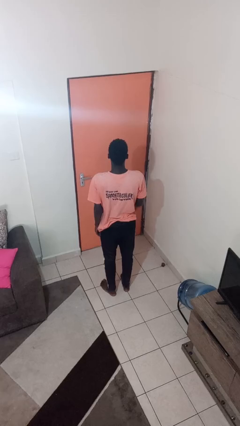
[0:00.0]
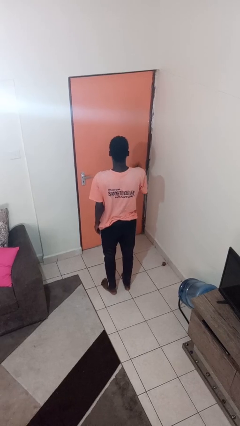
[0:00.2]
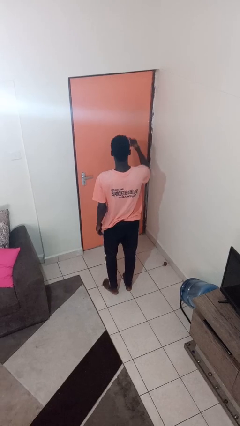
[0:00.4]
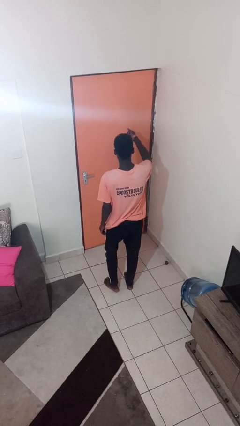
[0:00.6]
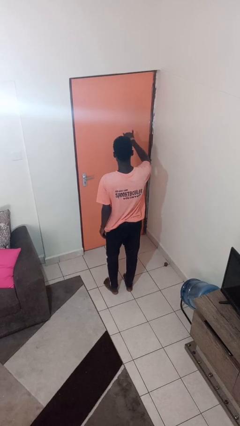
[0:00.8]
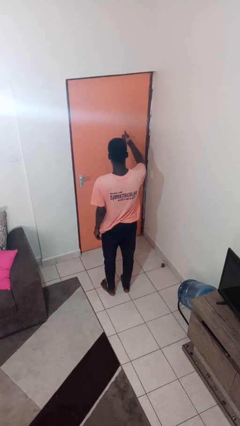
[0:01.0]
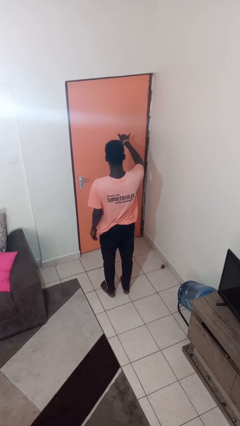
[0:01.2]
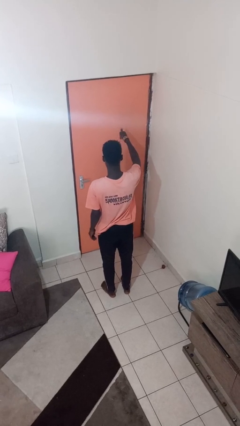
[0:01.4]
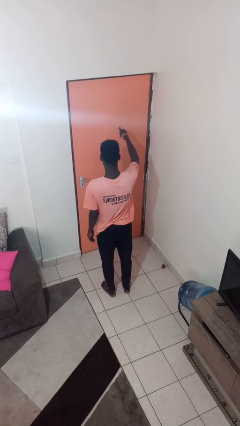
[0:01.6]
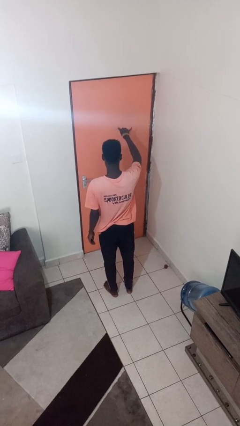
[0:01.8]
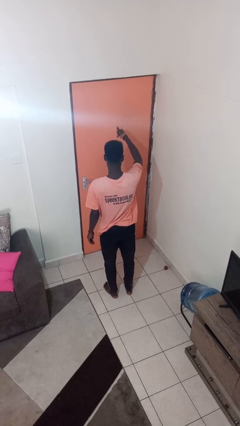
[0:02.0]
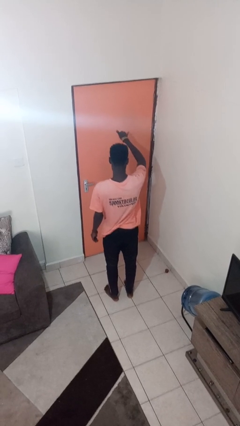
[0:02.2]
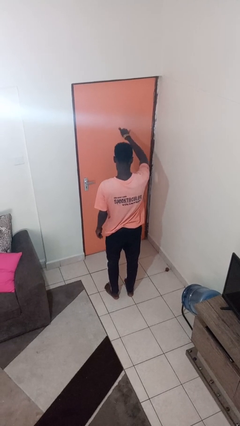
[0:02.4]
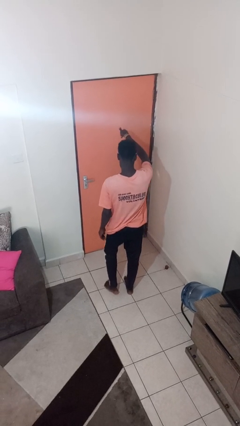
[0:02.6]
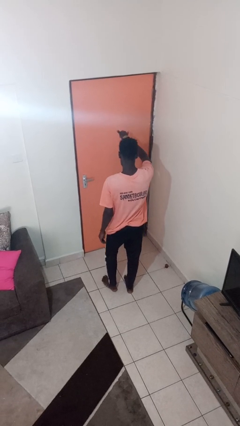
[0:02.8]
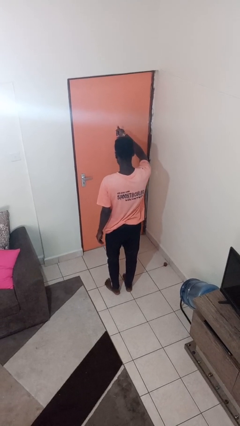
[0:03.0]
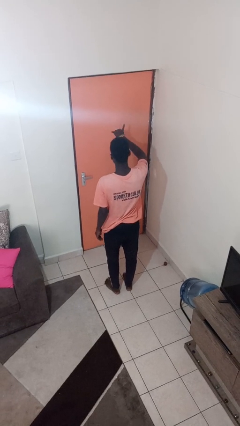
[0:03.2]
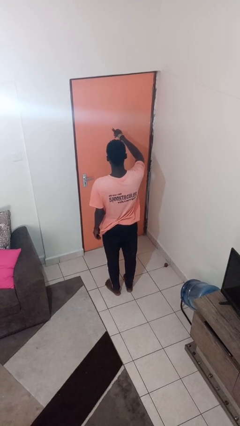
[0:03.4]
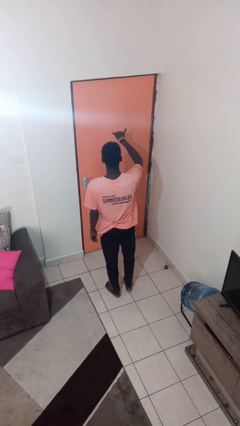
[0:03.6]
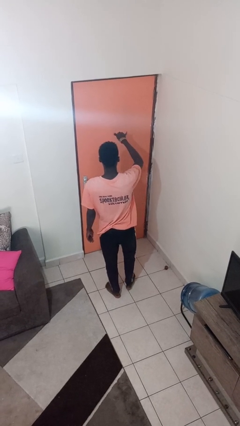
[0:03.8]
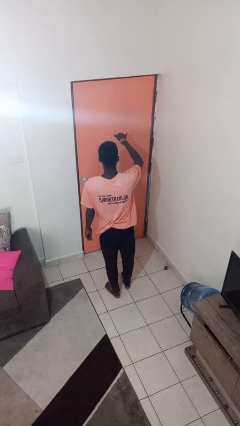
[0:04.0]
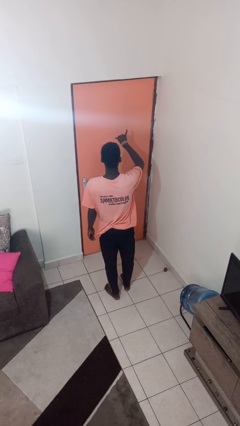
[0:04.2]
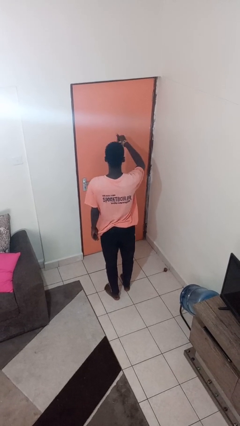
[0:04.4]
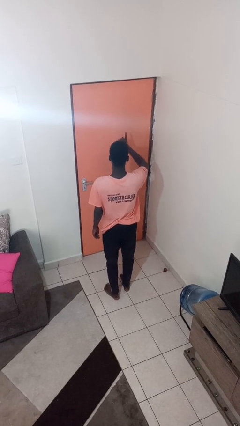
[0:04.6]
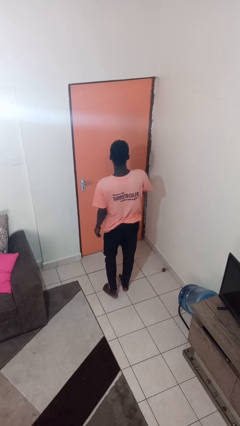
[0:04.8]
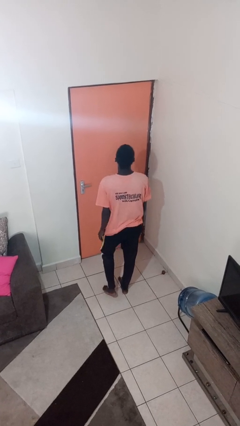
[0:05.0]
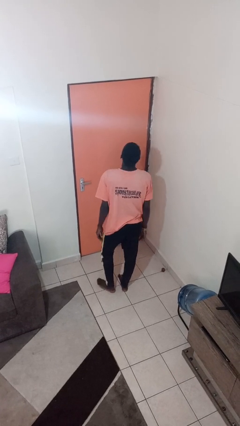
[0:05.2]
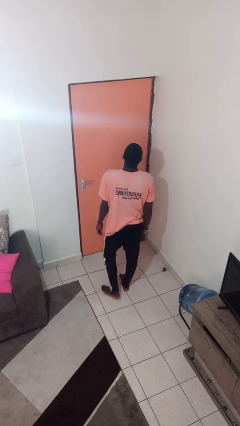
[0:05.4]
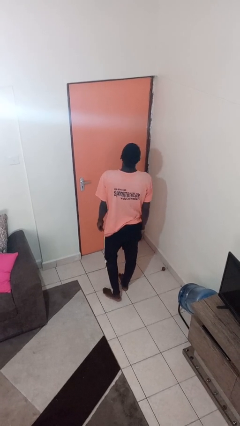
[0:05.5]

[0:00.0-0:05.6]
person gestures hang loose

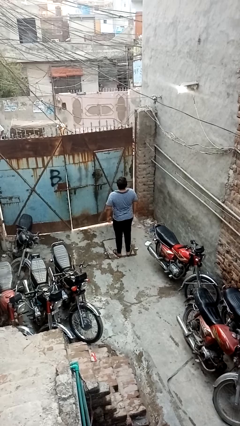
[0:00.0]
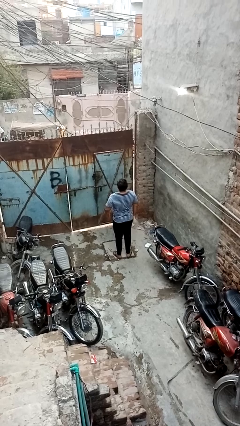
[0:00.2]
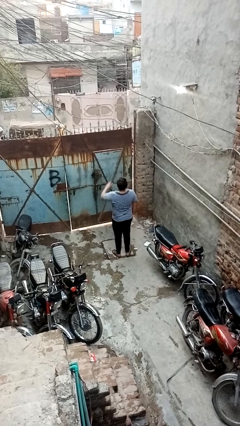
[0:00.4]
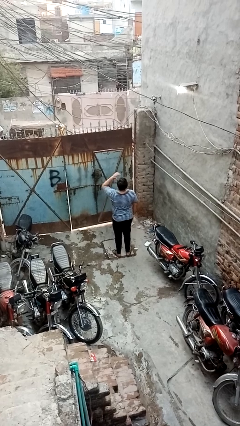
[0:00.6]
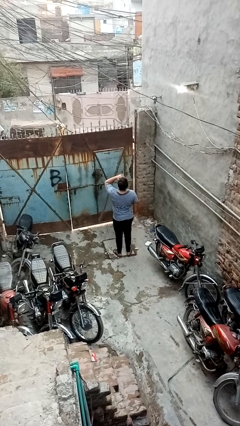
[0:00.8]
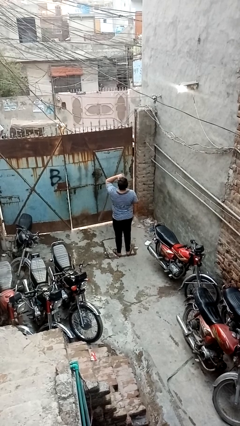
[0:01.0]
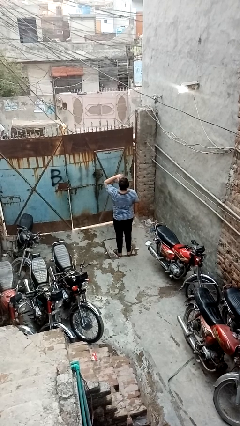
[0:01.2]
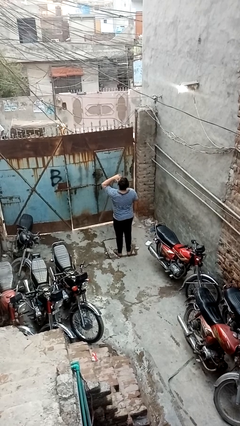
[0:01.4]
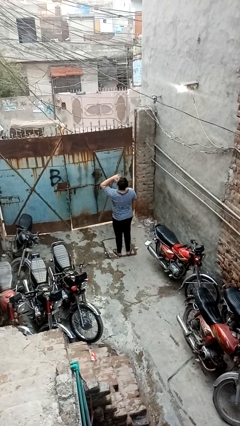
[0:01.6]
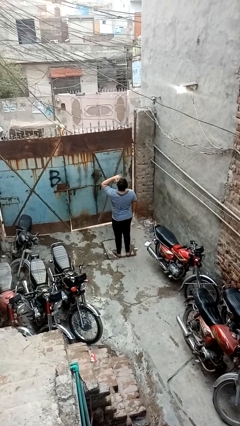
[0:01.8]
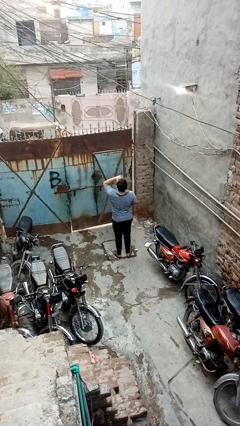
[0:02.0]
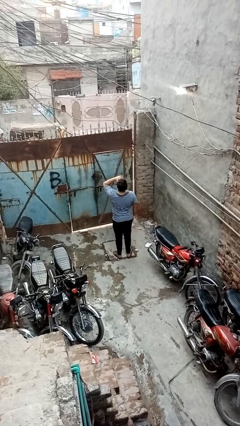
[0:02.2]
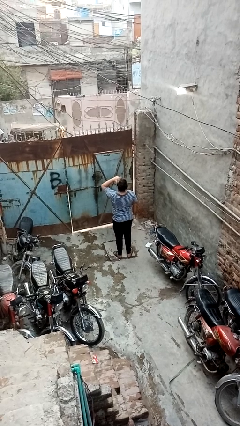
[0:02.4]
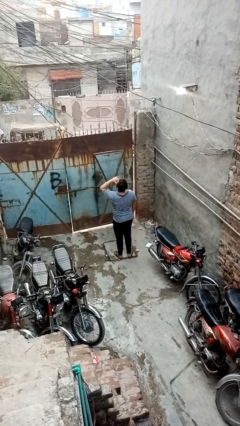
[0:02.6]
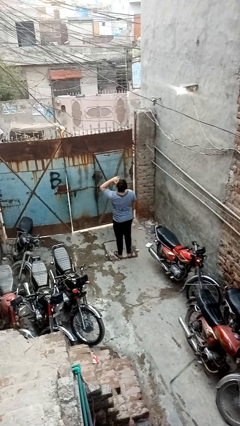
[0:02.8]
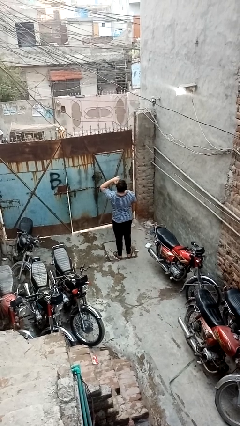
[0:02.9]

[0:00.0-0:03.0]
person shades eyes

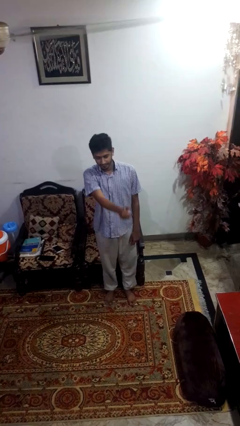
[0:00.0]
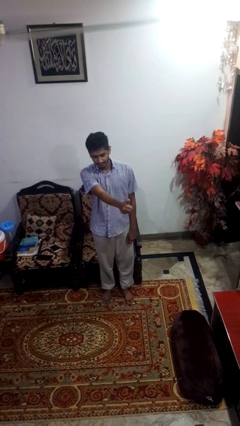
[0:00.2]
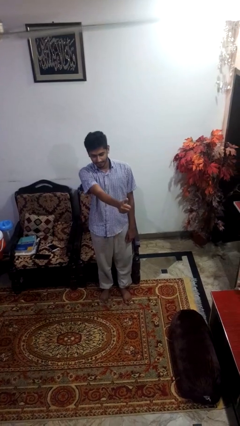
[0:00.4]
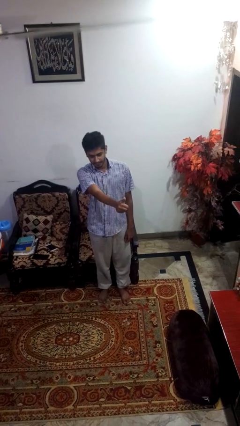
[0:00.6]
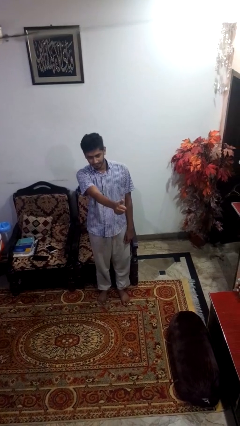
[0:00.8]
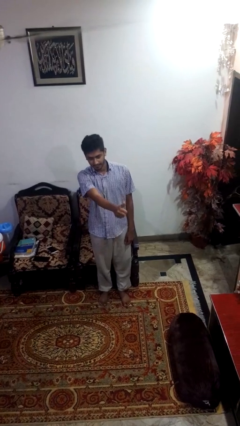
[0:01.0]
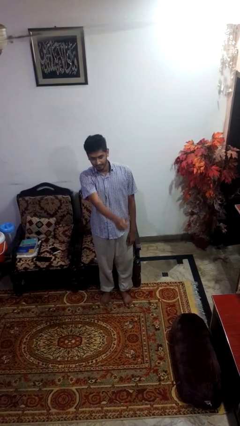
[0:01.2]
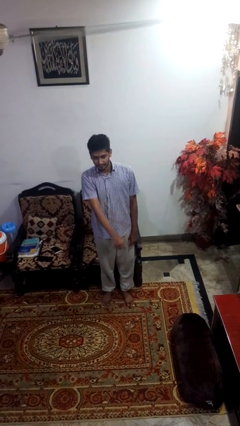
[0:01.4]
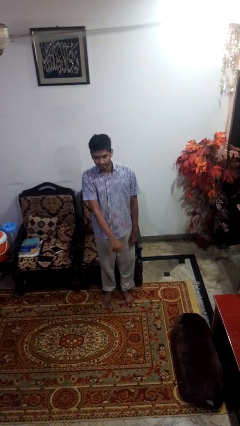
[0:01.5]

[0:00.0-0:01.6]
person gestures thumbs up

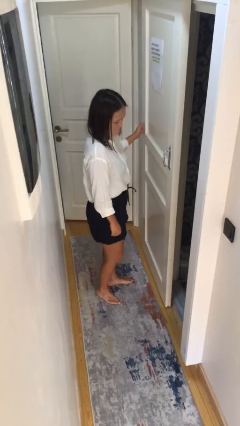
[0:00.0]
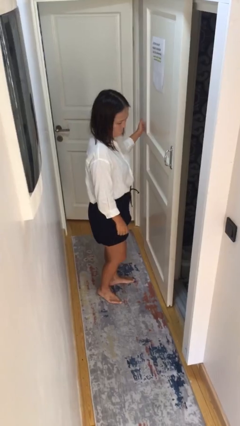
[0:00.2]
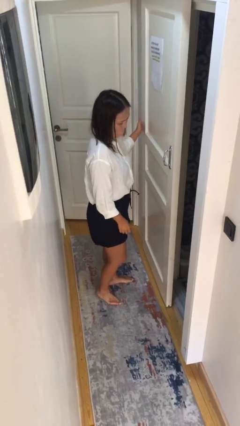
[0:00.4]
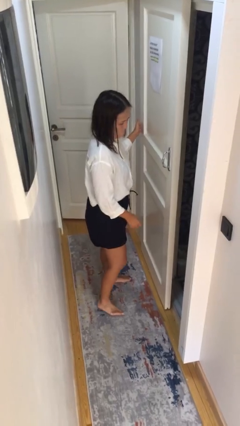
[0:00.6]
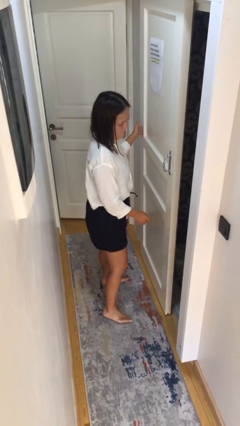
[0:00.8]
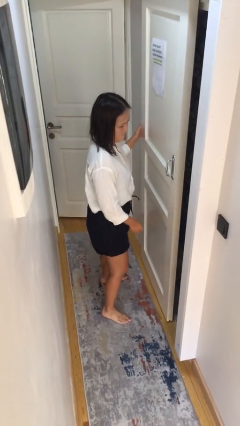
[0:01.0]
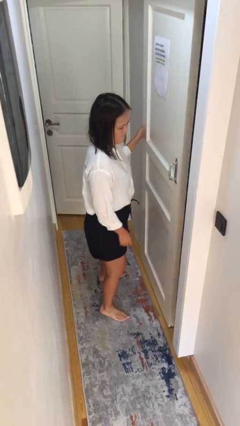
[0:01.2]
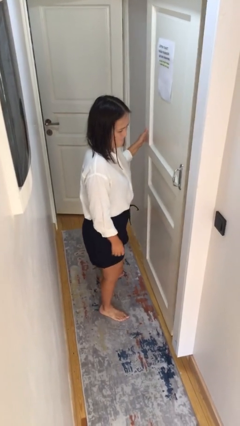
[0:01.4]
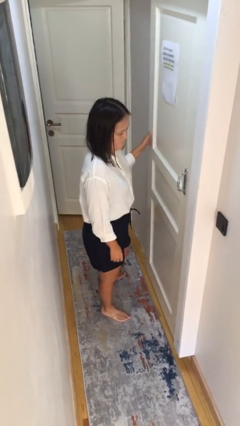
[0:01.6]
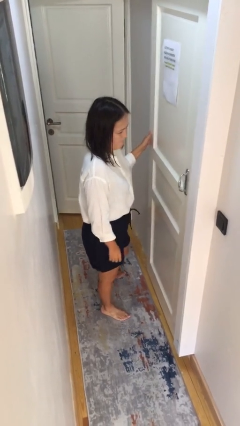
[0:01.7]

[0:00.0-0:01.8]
person closes sliding door

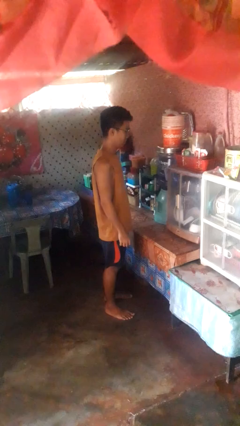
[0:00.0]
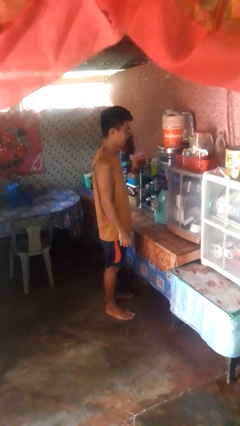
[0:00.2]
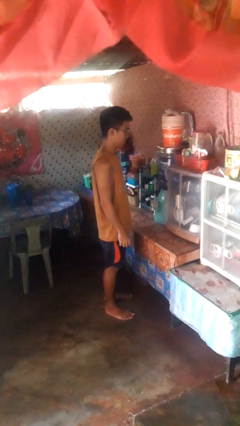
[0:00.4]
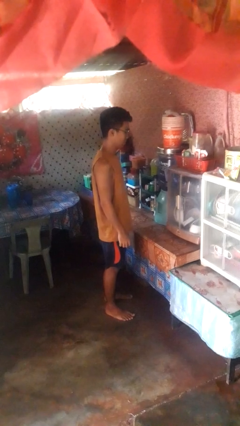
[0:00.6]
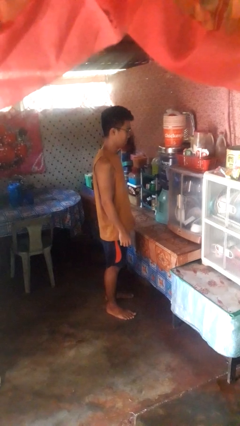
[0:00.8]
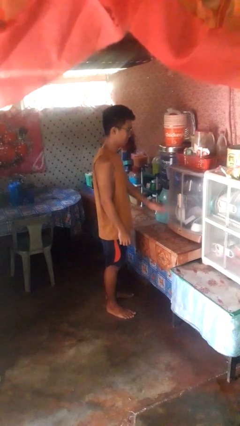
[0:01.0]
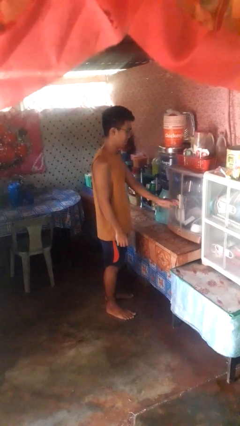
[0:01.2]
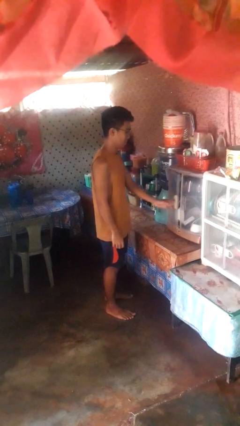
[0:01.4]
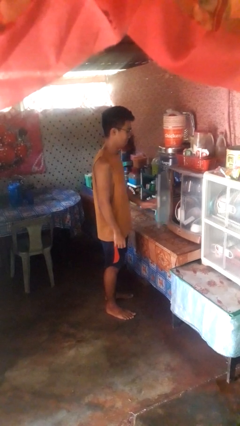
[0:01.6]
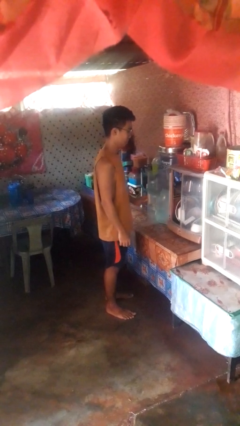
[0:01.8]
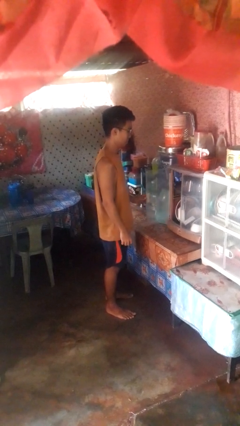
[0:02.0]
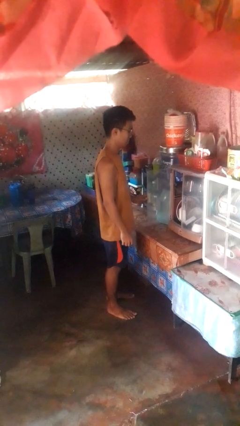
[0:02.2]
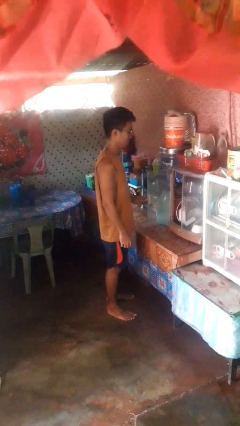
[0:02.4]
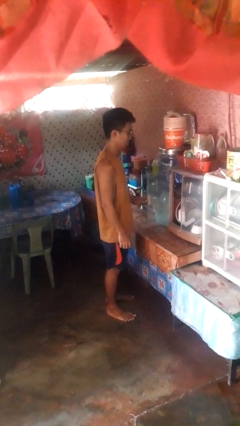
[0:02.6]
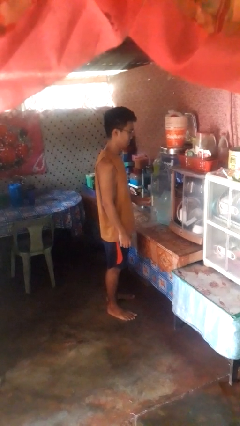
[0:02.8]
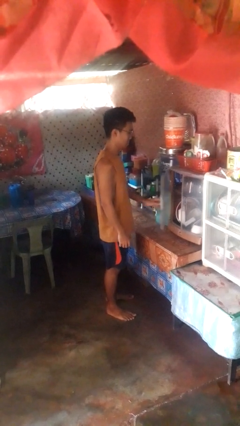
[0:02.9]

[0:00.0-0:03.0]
person opens cabinet

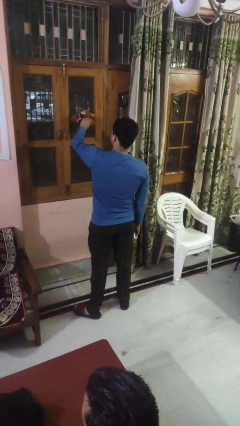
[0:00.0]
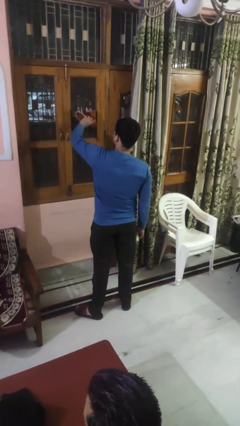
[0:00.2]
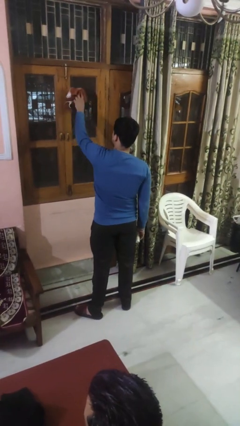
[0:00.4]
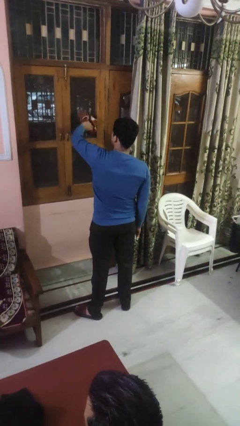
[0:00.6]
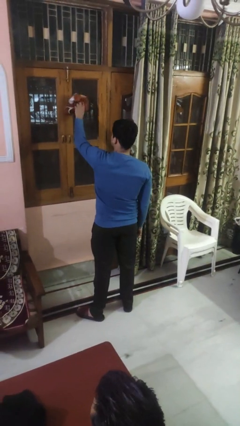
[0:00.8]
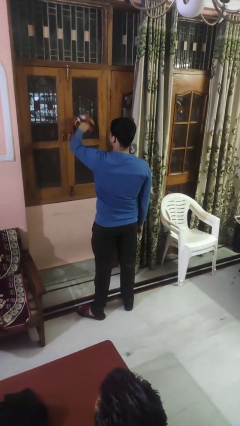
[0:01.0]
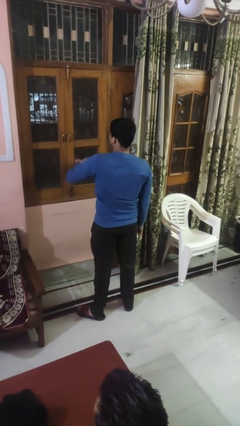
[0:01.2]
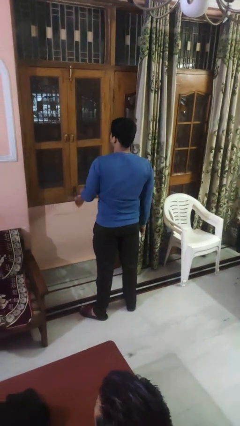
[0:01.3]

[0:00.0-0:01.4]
person washes window

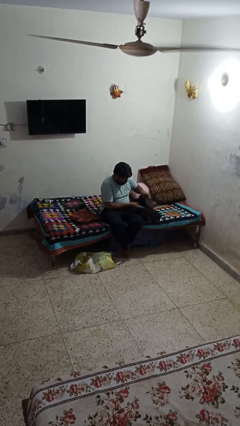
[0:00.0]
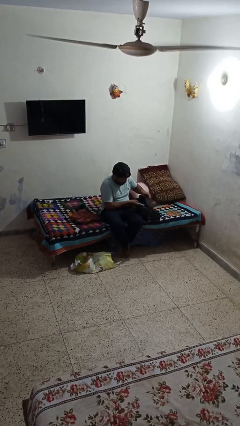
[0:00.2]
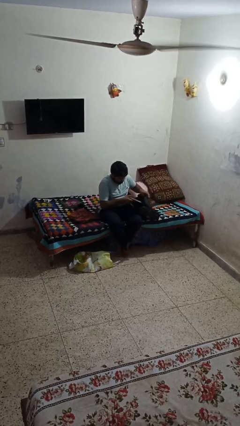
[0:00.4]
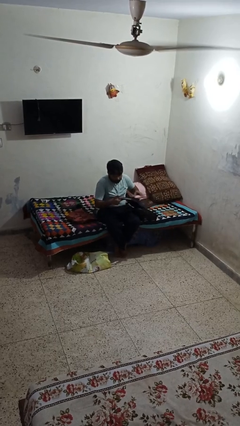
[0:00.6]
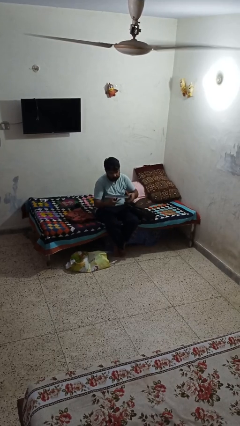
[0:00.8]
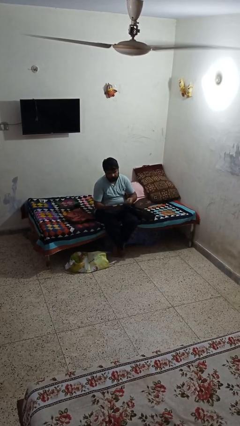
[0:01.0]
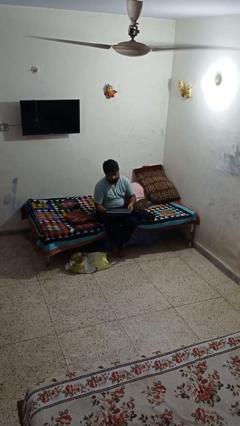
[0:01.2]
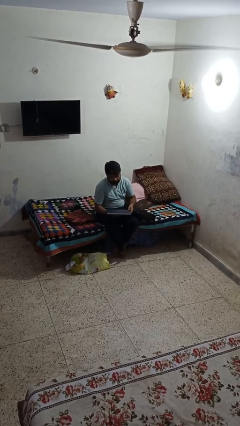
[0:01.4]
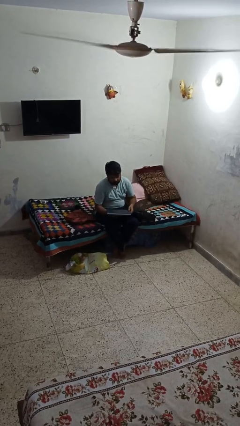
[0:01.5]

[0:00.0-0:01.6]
person takes object from backpack
